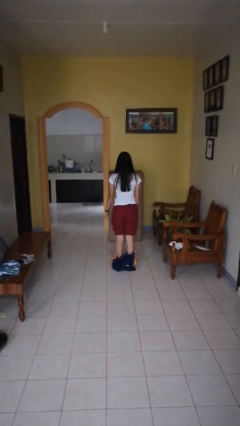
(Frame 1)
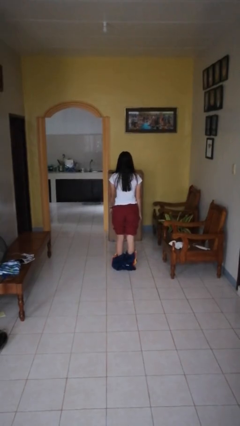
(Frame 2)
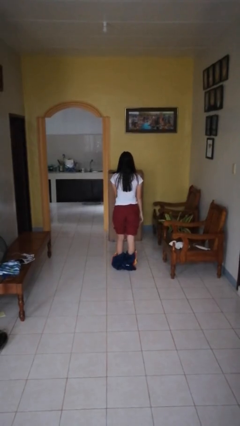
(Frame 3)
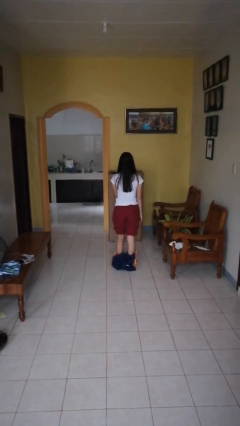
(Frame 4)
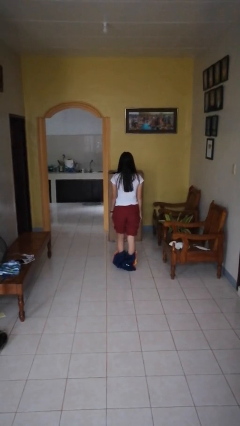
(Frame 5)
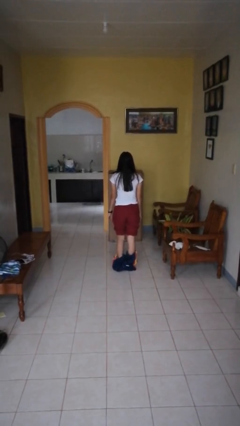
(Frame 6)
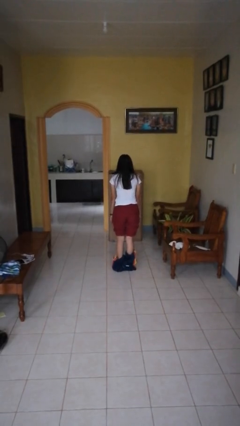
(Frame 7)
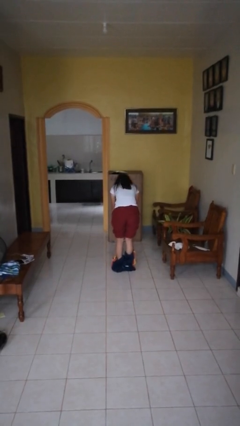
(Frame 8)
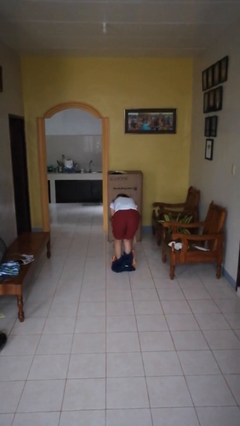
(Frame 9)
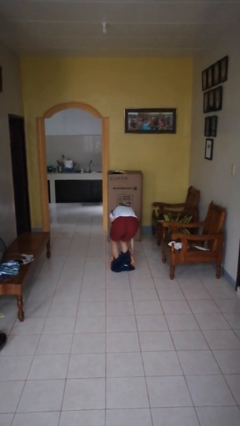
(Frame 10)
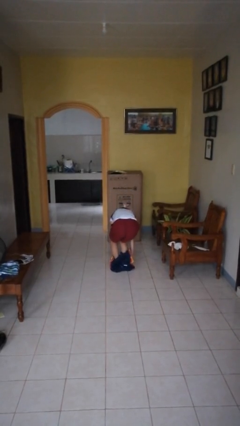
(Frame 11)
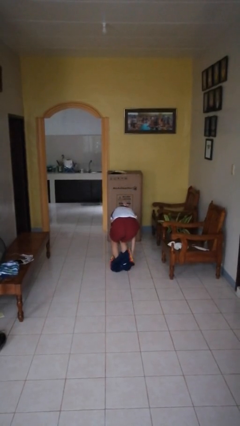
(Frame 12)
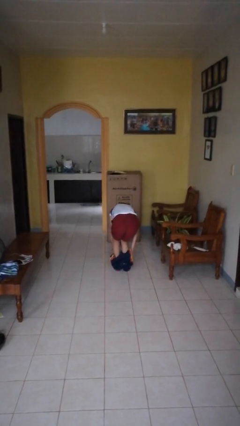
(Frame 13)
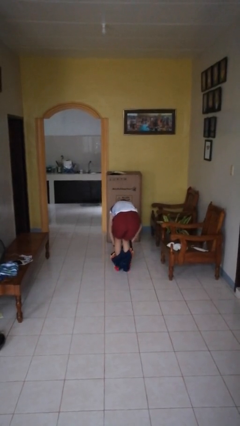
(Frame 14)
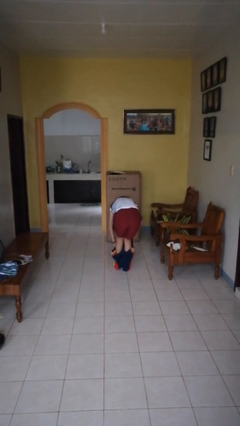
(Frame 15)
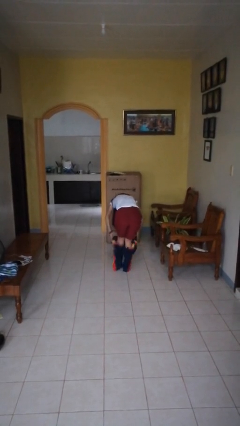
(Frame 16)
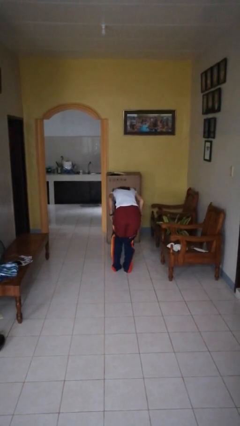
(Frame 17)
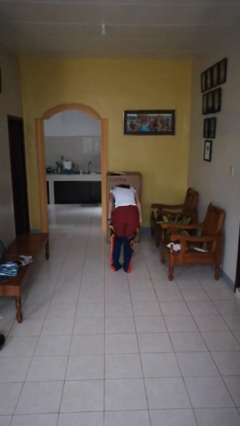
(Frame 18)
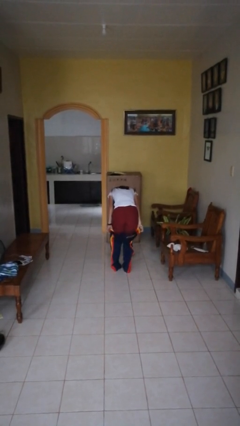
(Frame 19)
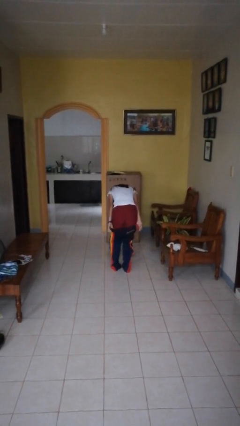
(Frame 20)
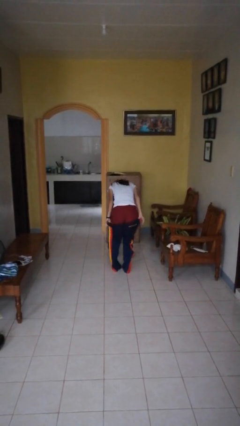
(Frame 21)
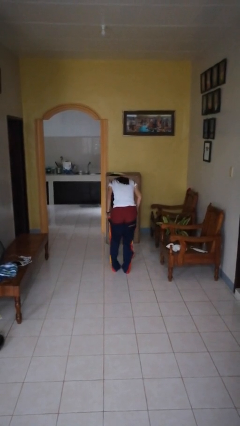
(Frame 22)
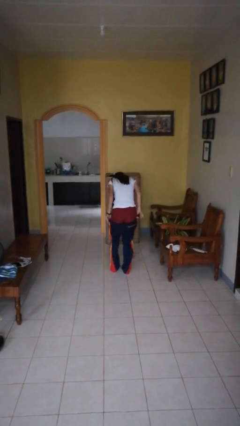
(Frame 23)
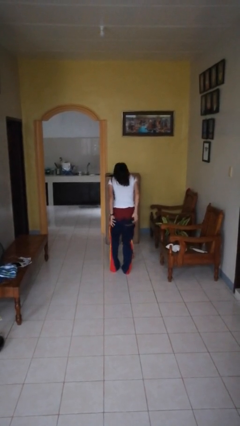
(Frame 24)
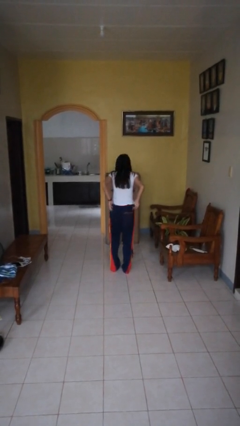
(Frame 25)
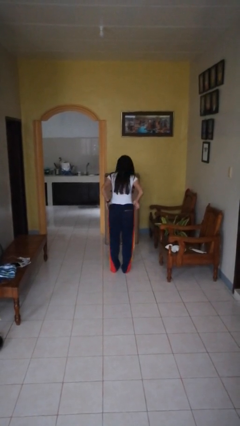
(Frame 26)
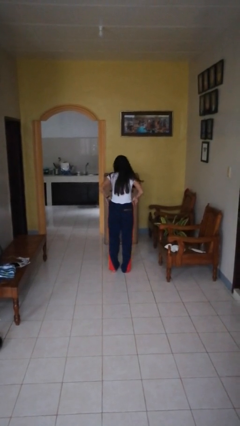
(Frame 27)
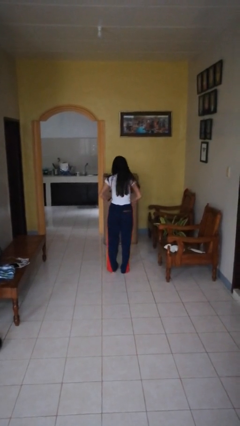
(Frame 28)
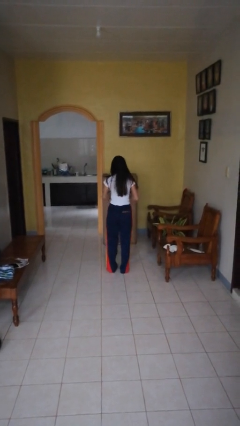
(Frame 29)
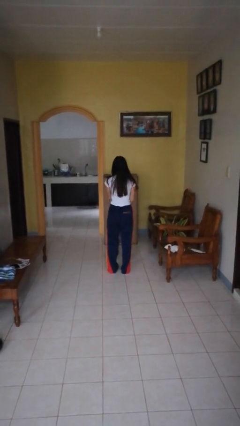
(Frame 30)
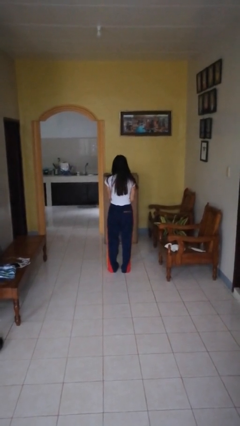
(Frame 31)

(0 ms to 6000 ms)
person puts on pants

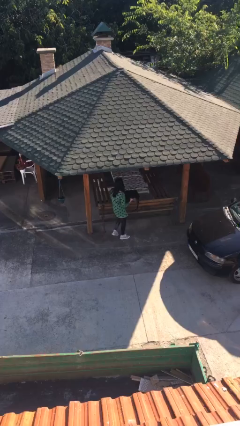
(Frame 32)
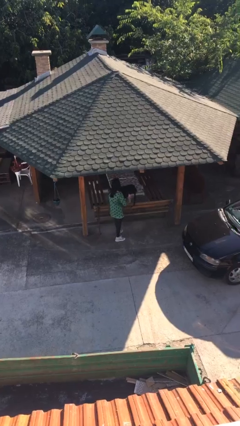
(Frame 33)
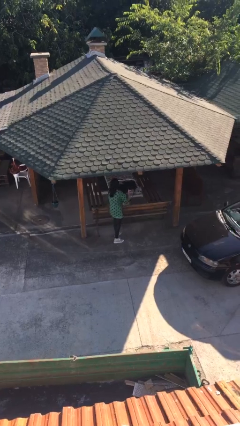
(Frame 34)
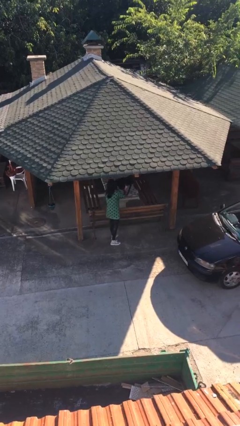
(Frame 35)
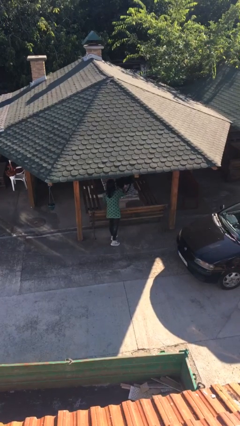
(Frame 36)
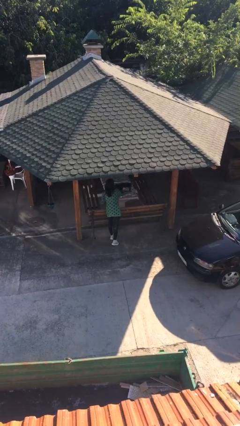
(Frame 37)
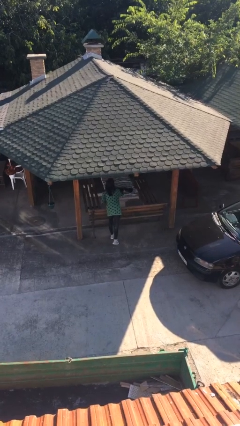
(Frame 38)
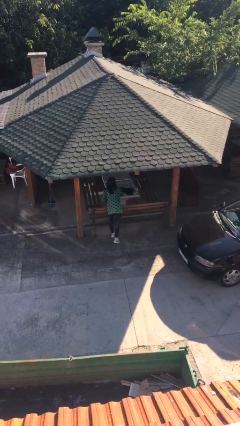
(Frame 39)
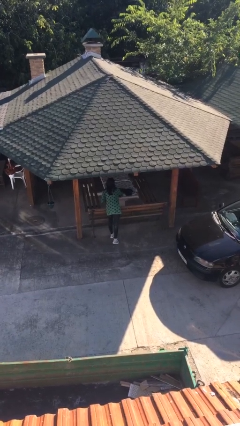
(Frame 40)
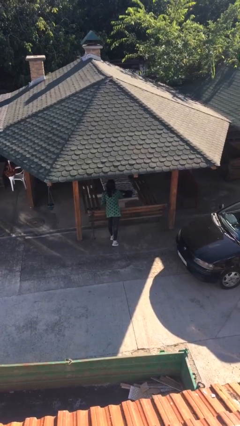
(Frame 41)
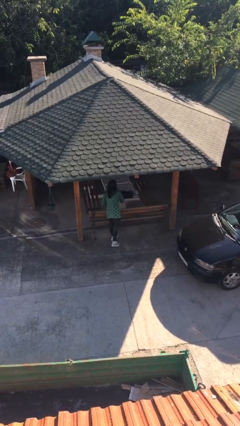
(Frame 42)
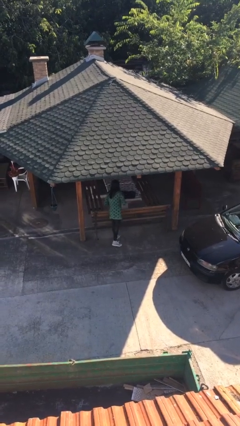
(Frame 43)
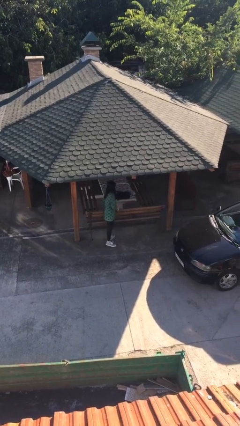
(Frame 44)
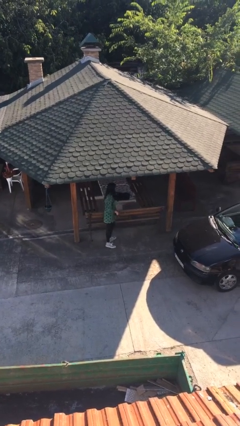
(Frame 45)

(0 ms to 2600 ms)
person puts down object on table

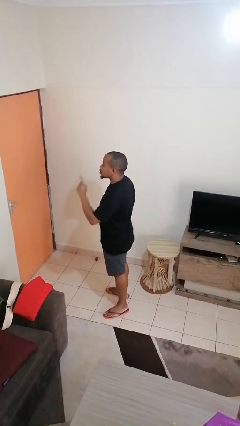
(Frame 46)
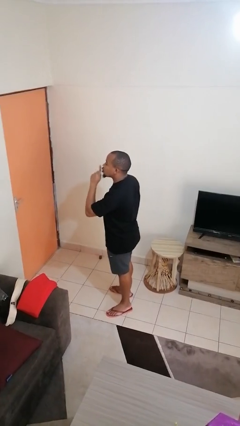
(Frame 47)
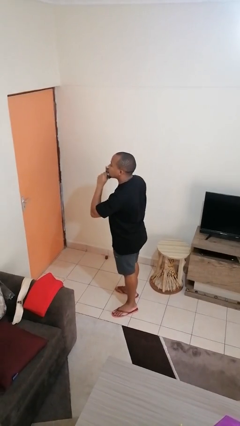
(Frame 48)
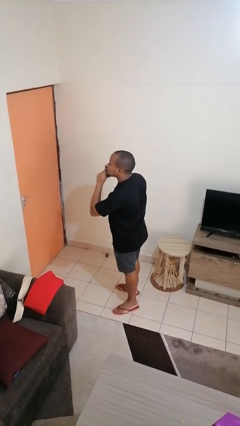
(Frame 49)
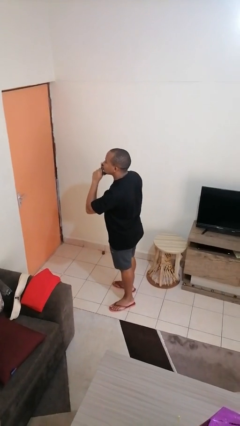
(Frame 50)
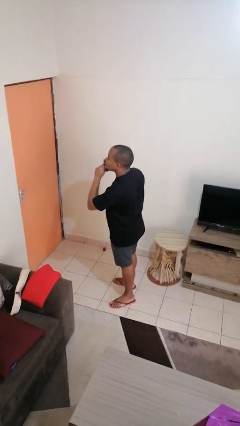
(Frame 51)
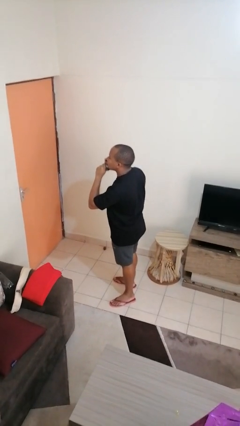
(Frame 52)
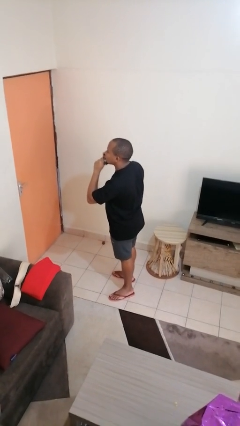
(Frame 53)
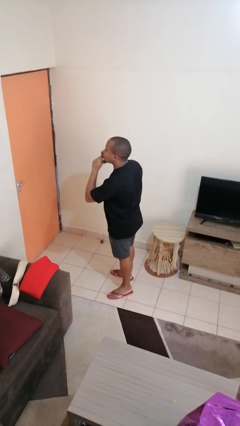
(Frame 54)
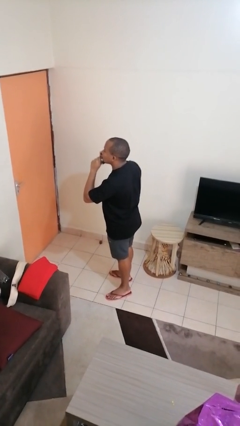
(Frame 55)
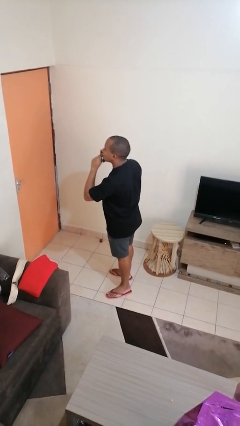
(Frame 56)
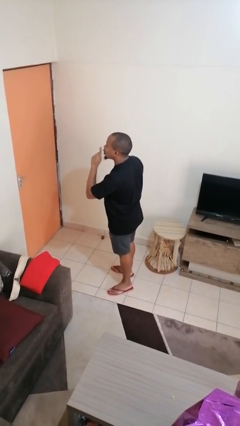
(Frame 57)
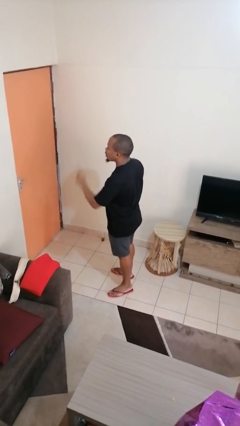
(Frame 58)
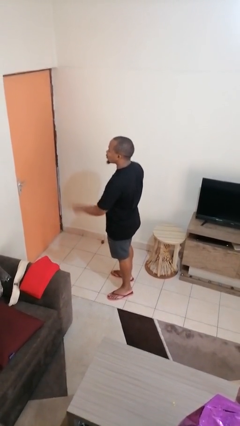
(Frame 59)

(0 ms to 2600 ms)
person gestures be quiet

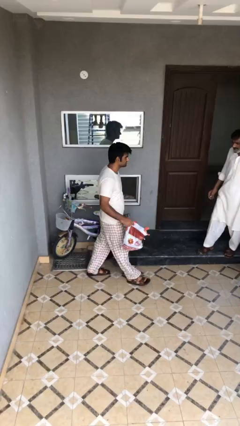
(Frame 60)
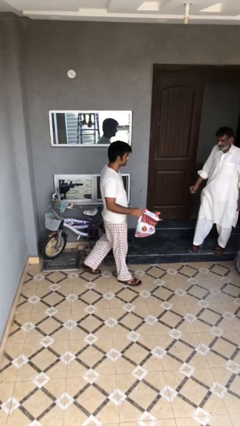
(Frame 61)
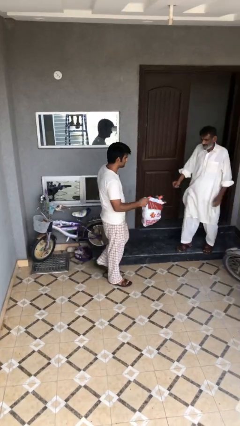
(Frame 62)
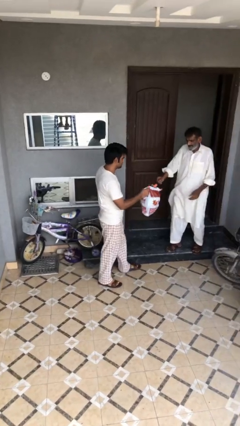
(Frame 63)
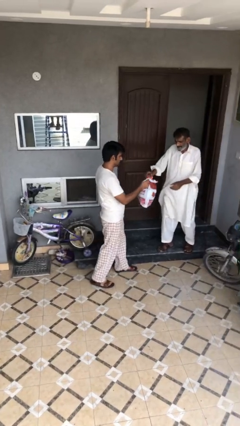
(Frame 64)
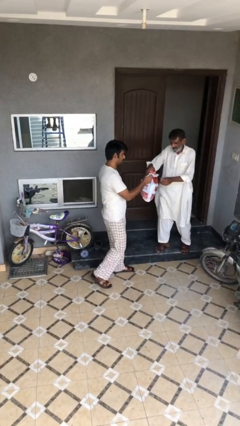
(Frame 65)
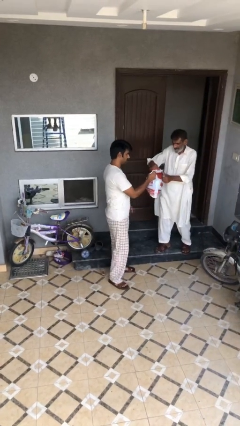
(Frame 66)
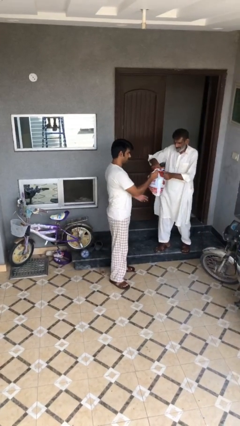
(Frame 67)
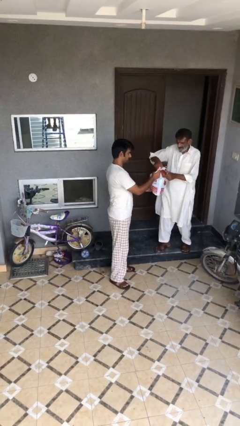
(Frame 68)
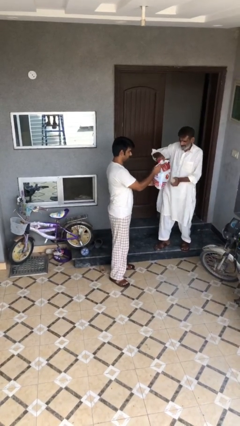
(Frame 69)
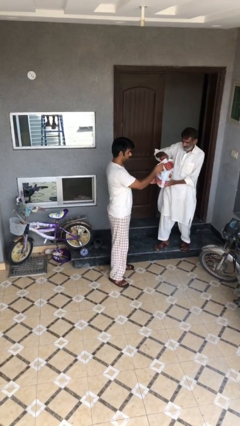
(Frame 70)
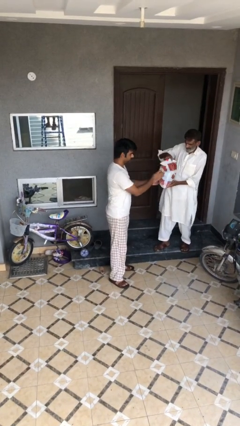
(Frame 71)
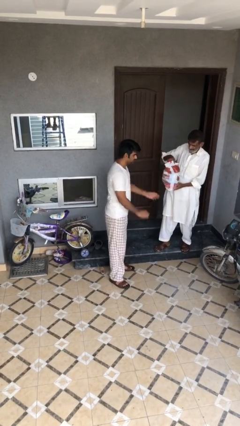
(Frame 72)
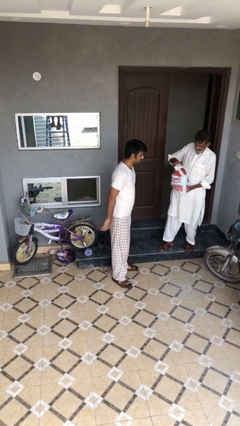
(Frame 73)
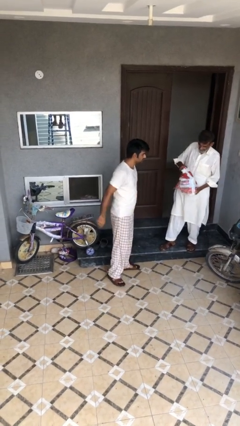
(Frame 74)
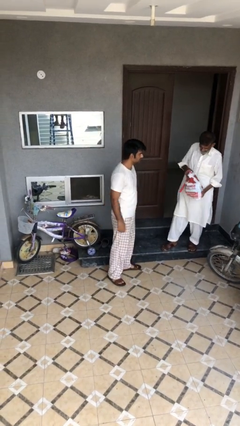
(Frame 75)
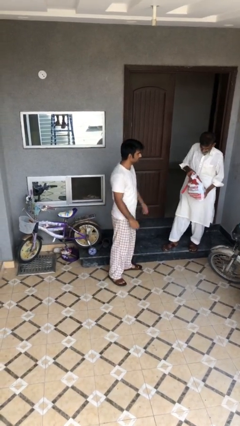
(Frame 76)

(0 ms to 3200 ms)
person transfers object to person

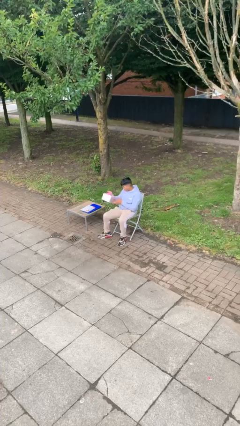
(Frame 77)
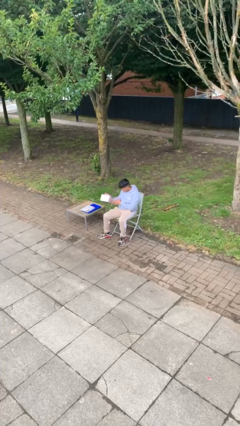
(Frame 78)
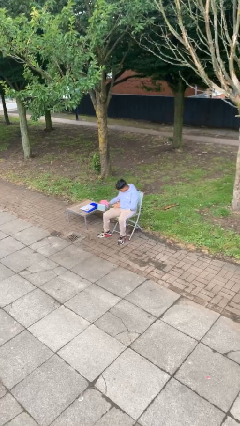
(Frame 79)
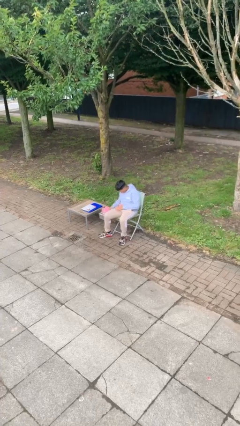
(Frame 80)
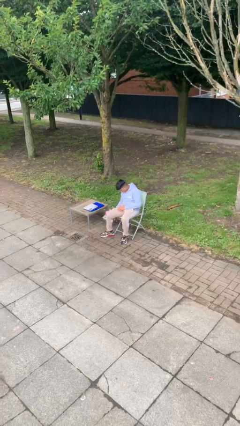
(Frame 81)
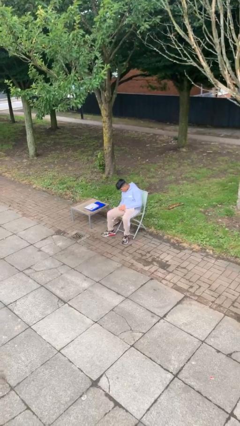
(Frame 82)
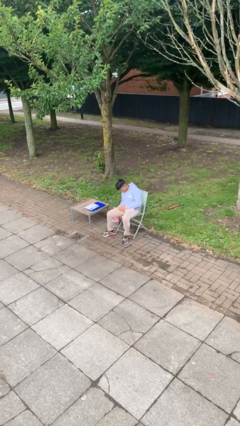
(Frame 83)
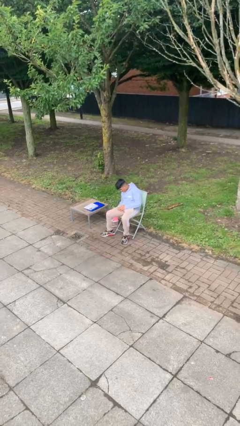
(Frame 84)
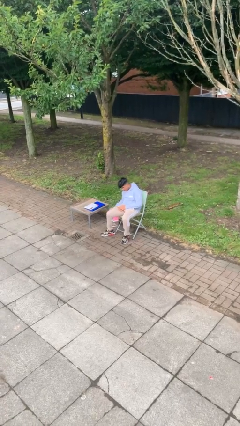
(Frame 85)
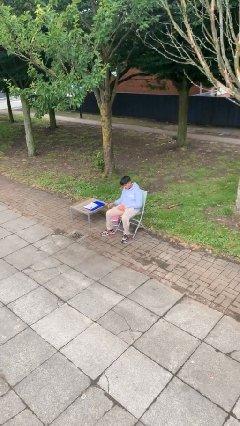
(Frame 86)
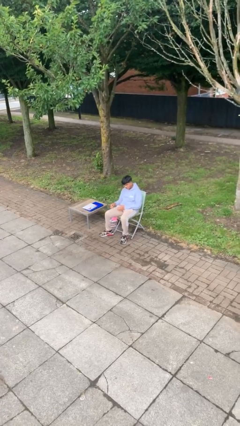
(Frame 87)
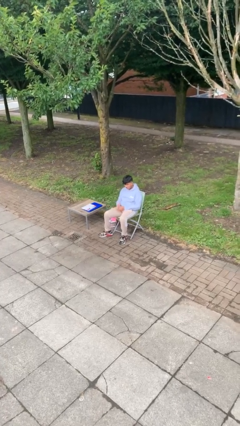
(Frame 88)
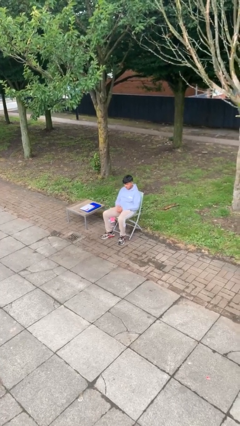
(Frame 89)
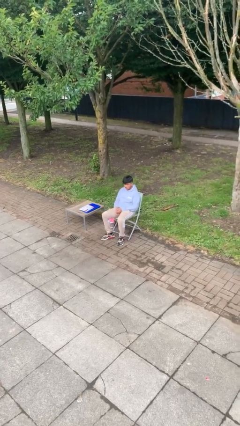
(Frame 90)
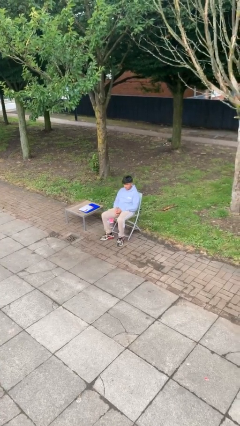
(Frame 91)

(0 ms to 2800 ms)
person puts down object on floor

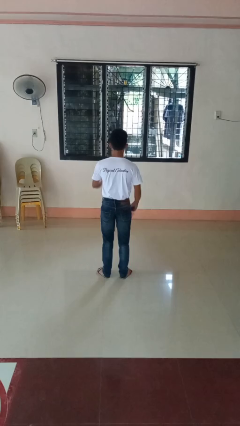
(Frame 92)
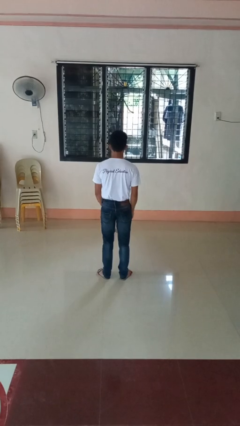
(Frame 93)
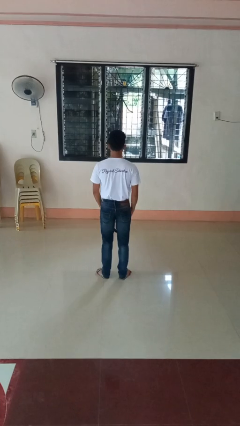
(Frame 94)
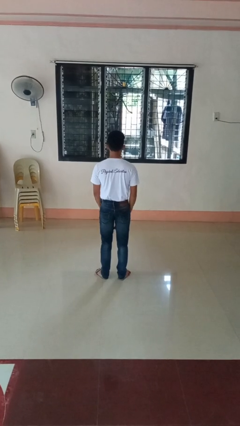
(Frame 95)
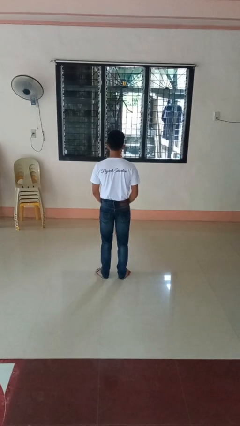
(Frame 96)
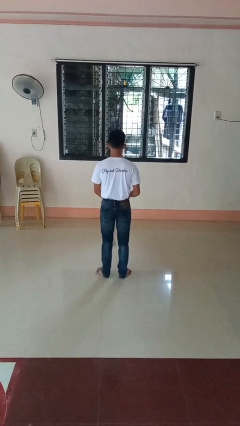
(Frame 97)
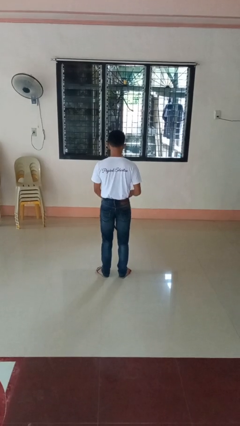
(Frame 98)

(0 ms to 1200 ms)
person takes off belt
